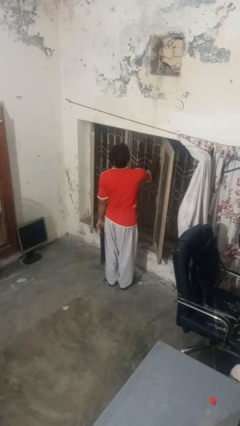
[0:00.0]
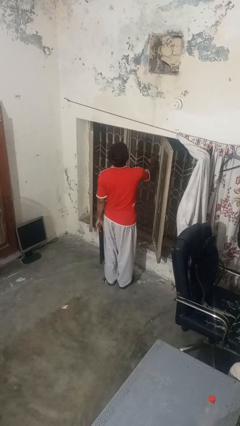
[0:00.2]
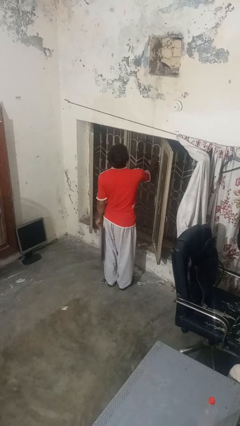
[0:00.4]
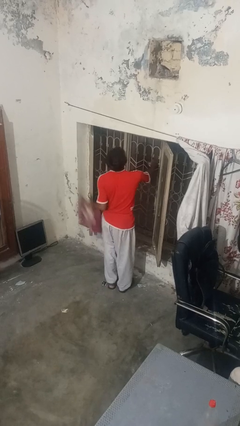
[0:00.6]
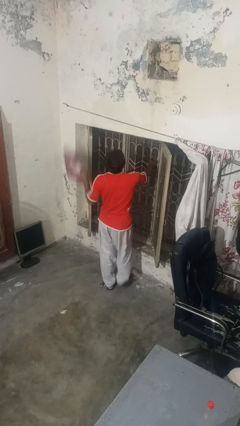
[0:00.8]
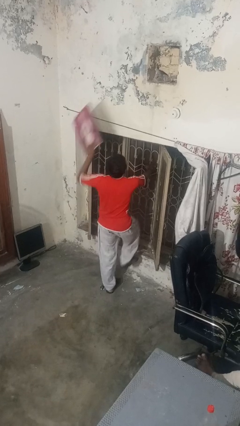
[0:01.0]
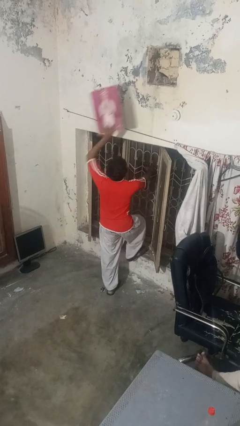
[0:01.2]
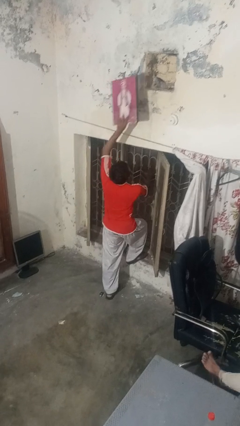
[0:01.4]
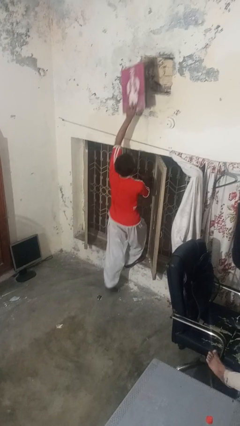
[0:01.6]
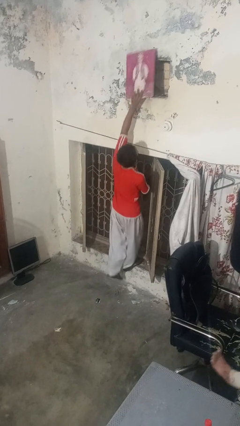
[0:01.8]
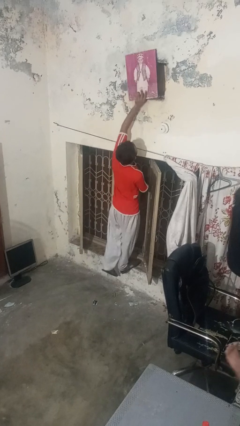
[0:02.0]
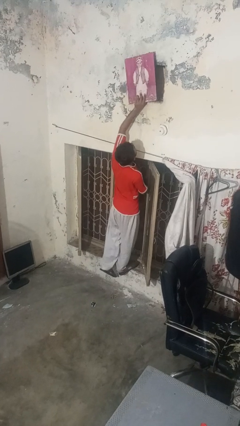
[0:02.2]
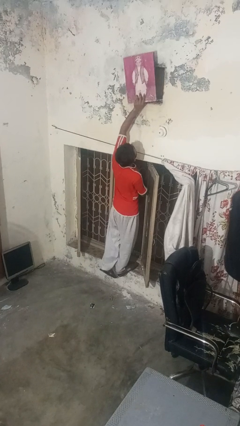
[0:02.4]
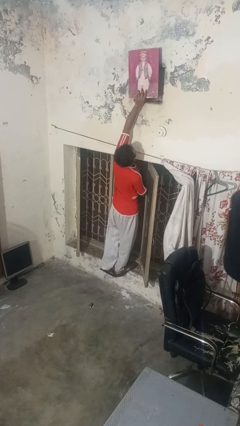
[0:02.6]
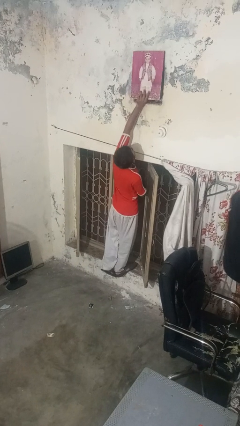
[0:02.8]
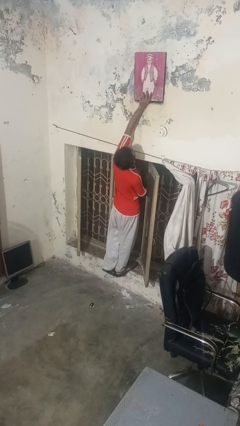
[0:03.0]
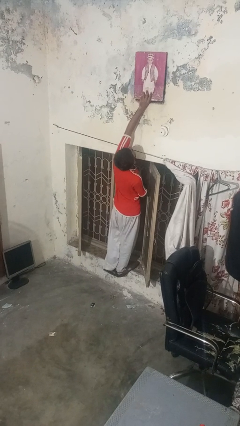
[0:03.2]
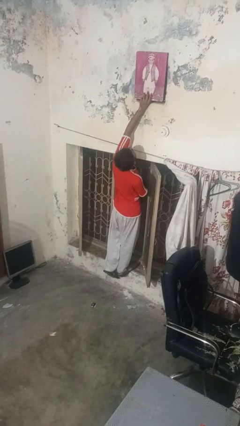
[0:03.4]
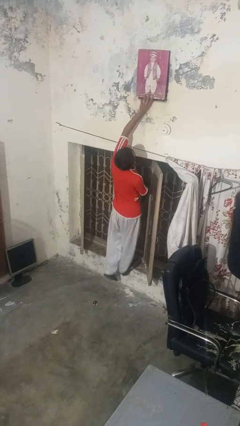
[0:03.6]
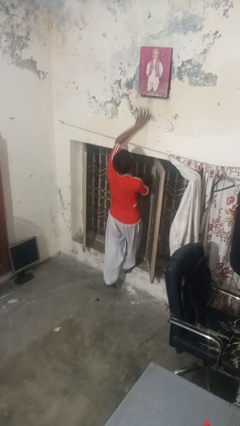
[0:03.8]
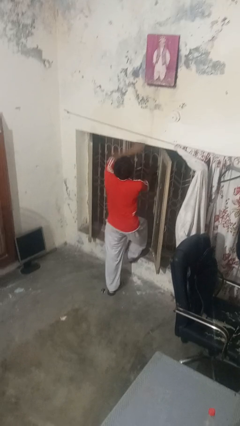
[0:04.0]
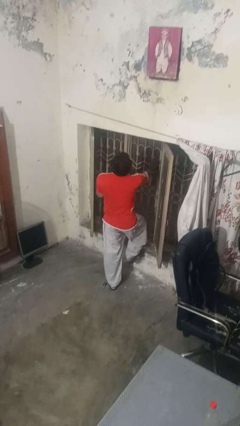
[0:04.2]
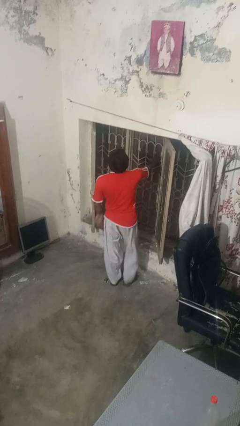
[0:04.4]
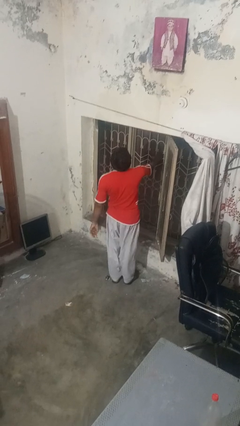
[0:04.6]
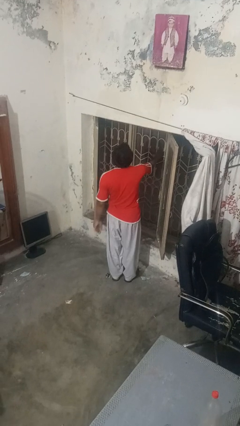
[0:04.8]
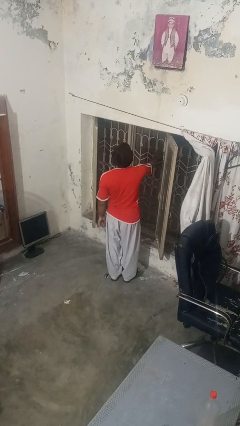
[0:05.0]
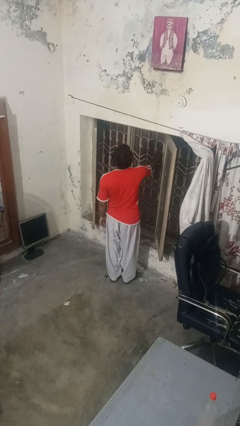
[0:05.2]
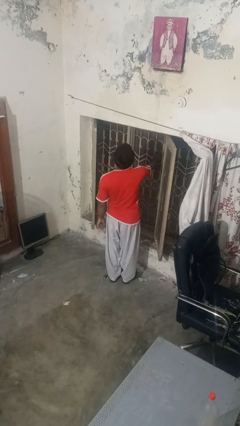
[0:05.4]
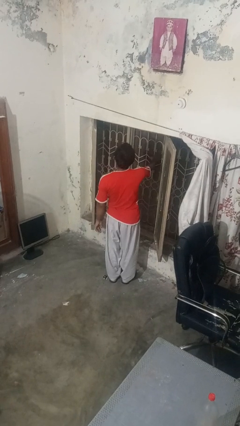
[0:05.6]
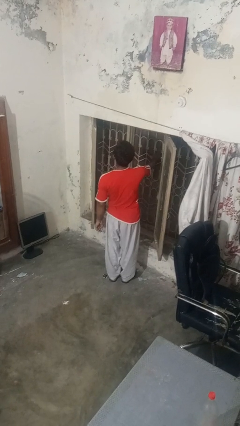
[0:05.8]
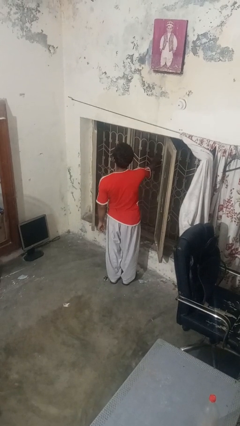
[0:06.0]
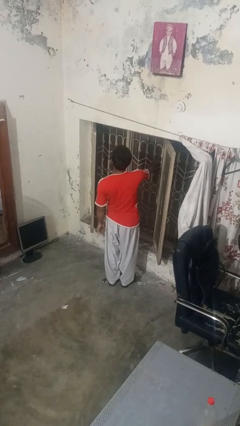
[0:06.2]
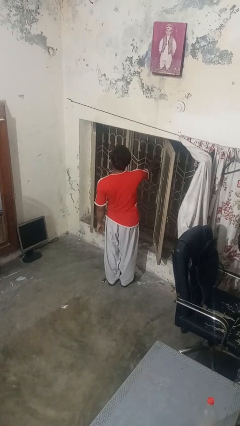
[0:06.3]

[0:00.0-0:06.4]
person puts up picture frame

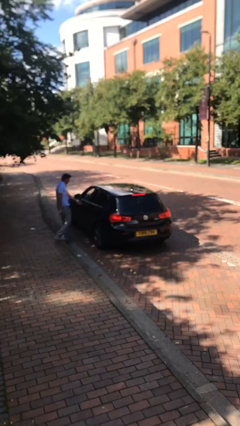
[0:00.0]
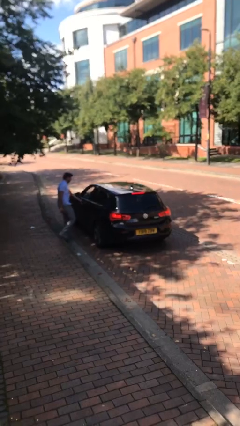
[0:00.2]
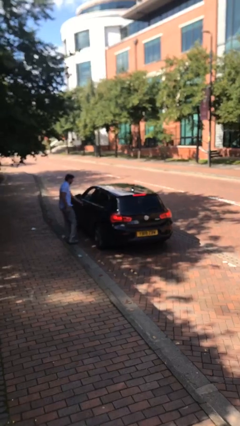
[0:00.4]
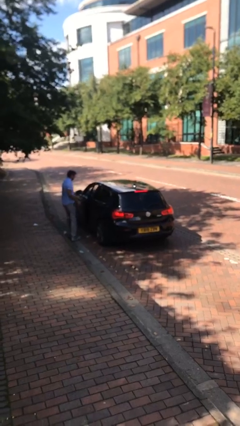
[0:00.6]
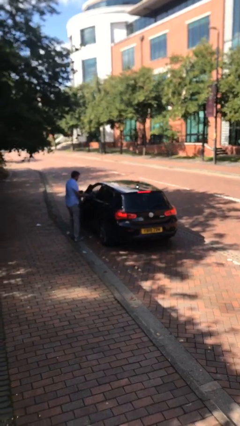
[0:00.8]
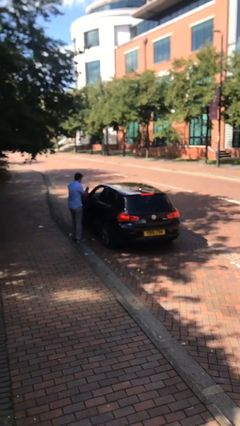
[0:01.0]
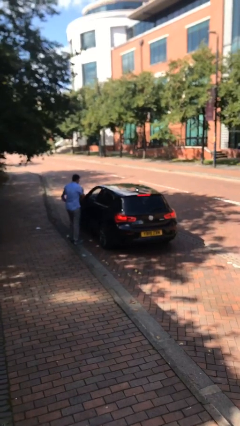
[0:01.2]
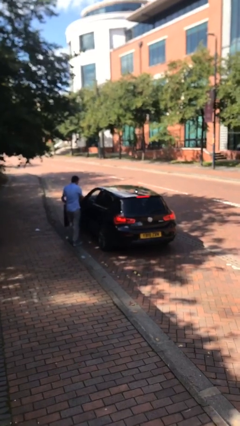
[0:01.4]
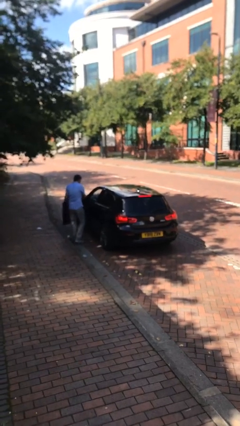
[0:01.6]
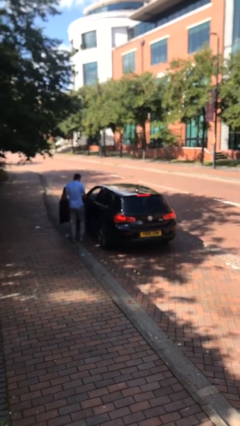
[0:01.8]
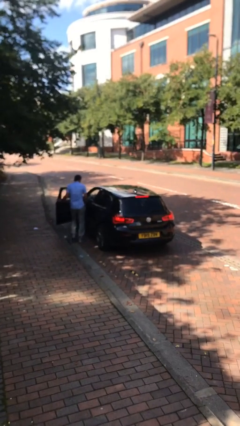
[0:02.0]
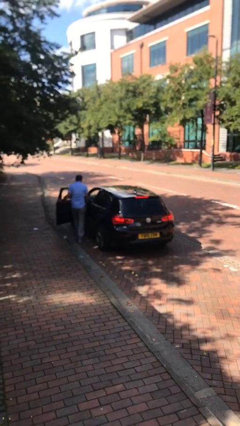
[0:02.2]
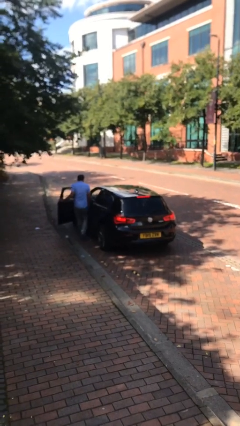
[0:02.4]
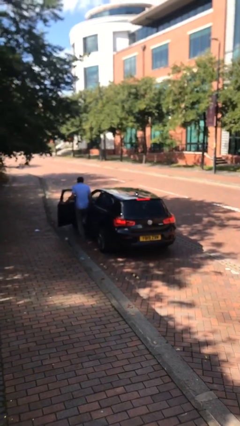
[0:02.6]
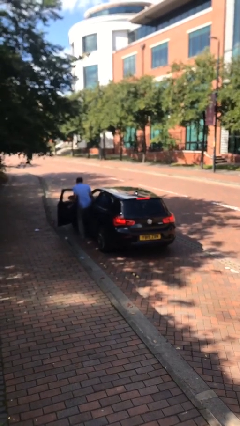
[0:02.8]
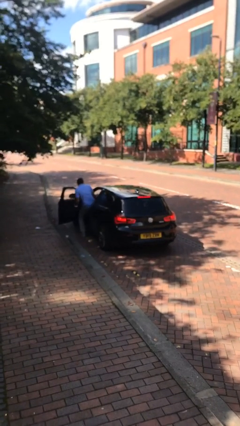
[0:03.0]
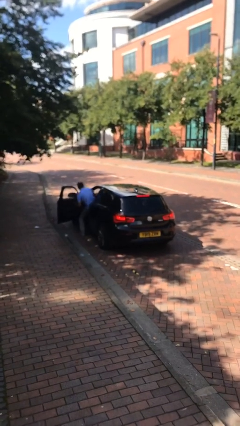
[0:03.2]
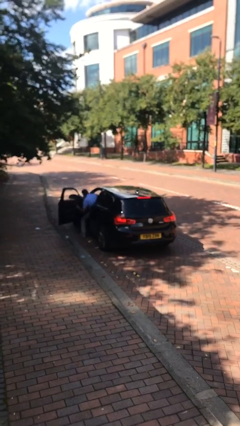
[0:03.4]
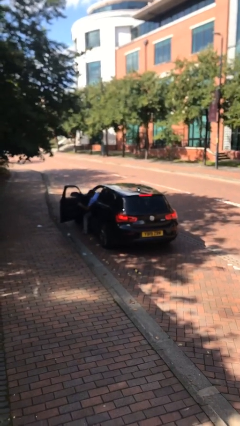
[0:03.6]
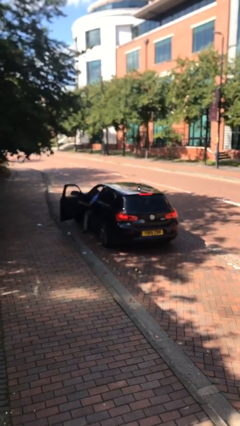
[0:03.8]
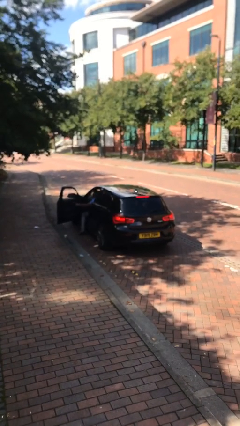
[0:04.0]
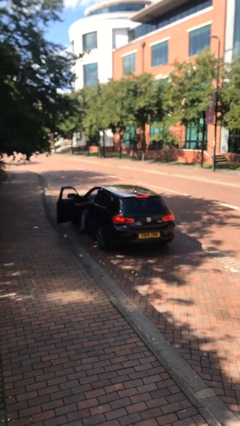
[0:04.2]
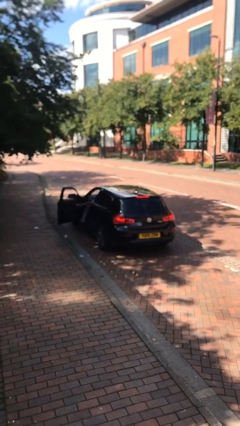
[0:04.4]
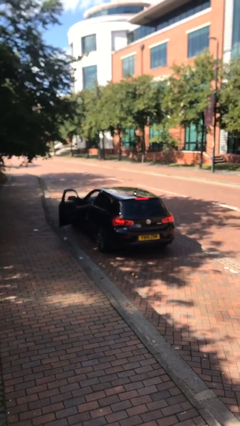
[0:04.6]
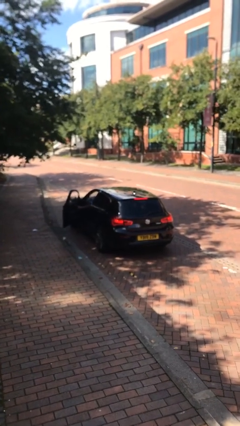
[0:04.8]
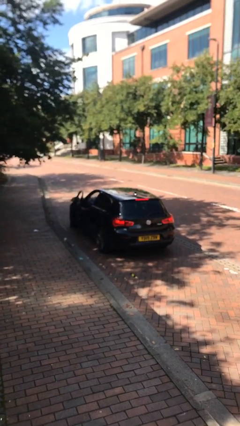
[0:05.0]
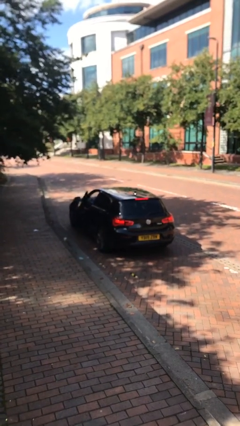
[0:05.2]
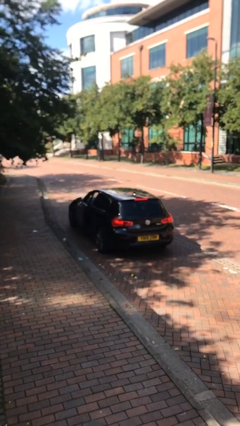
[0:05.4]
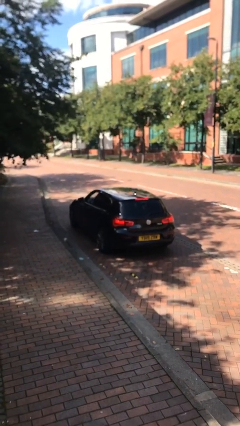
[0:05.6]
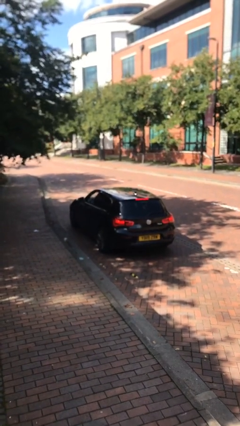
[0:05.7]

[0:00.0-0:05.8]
car picks up person

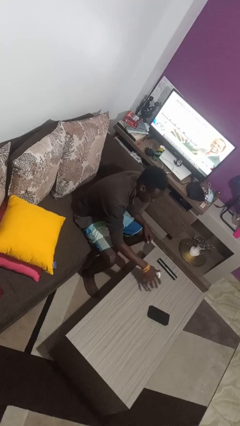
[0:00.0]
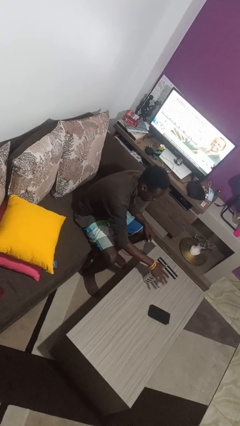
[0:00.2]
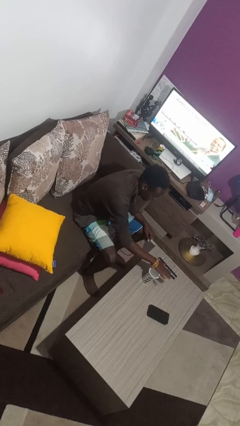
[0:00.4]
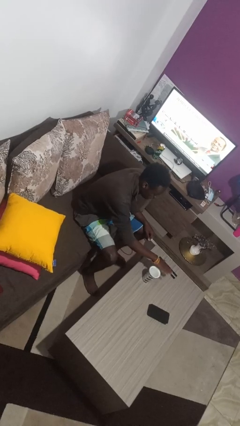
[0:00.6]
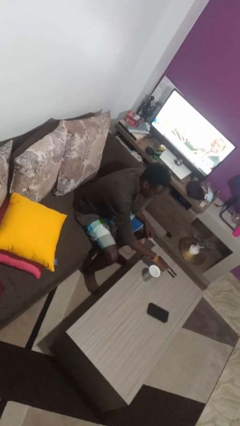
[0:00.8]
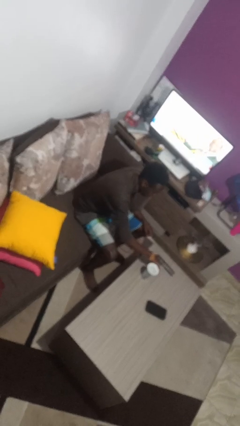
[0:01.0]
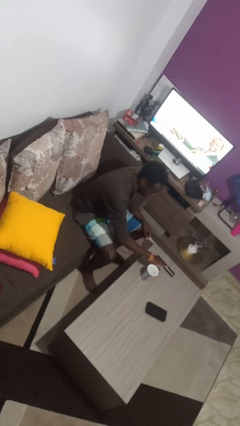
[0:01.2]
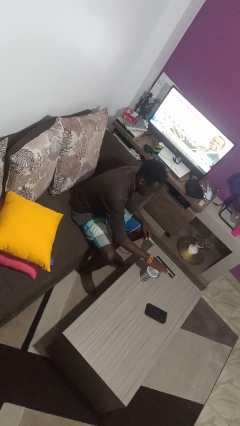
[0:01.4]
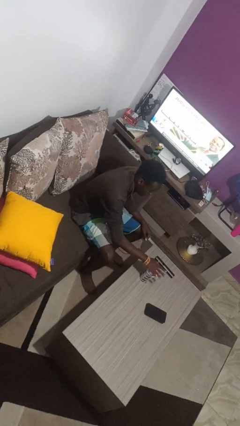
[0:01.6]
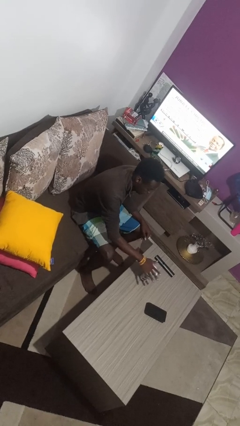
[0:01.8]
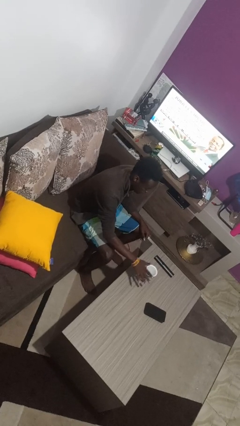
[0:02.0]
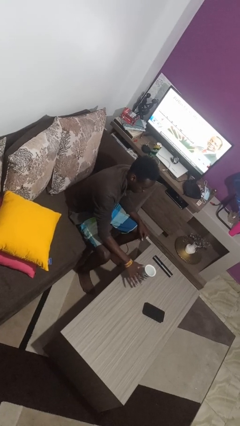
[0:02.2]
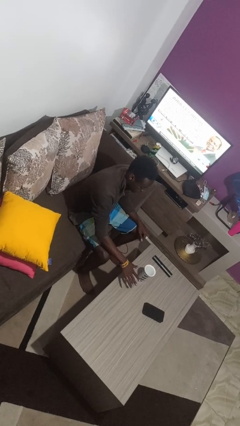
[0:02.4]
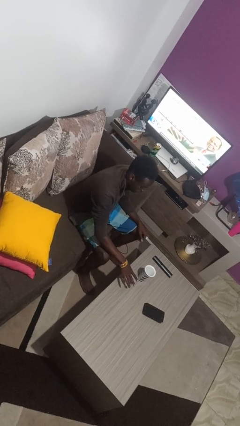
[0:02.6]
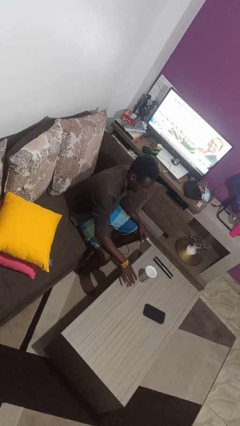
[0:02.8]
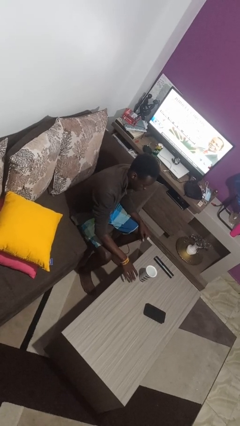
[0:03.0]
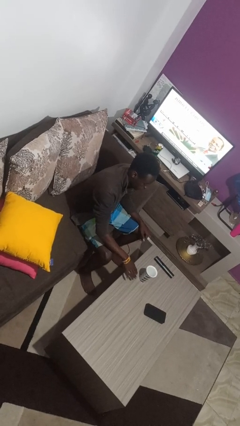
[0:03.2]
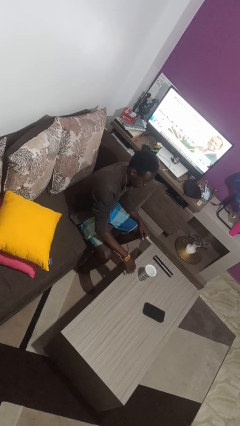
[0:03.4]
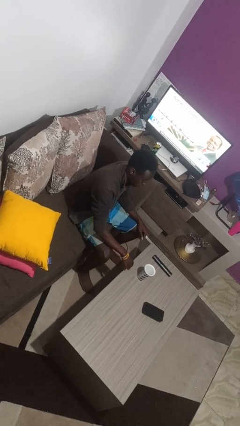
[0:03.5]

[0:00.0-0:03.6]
person waves hand over object

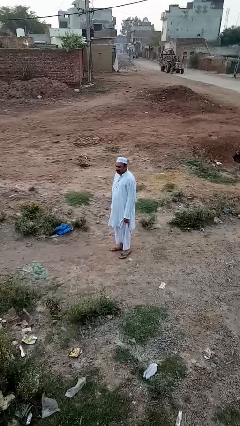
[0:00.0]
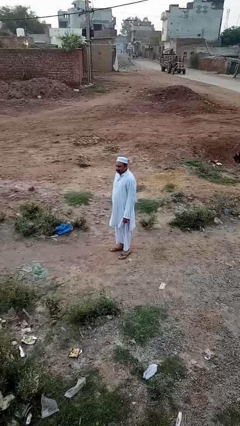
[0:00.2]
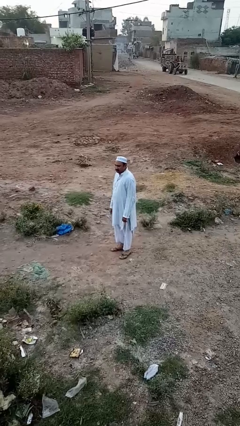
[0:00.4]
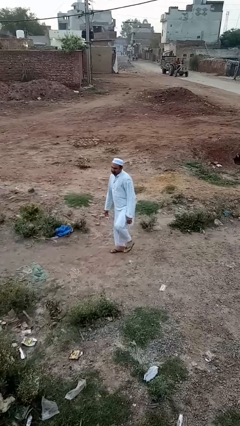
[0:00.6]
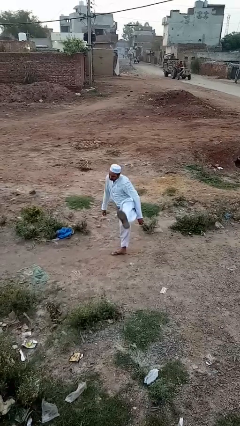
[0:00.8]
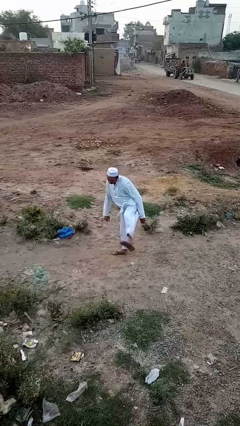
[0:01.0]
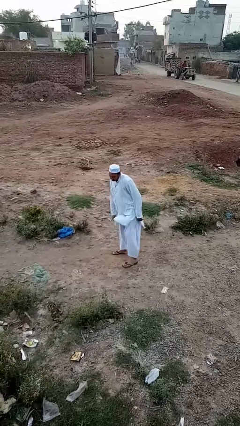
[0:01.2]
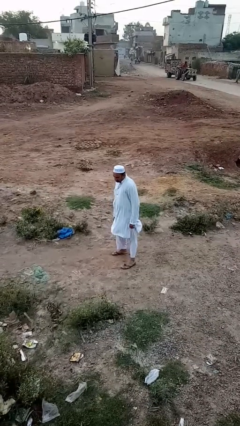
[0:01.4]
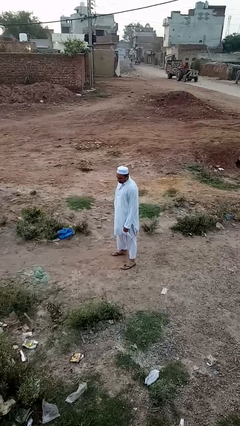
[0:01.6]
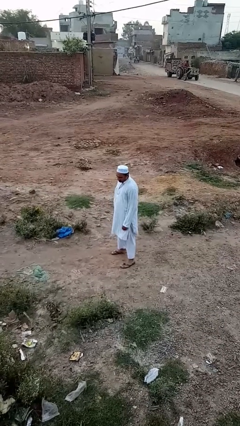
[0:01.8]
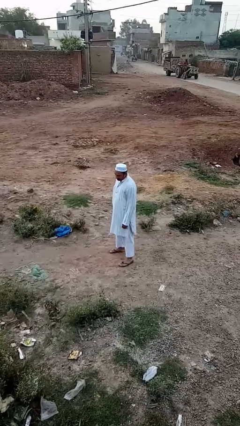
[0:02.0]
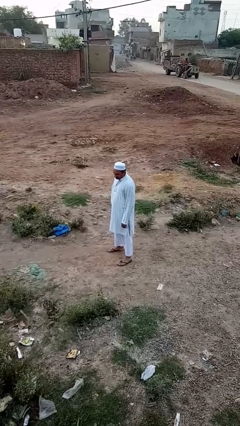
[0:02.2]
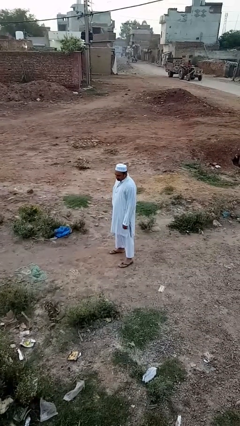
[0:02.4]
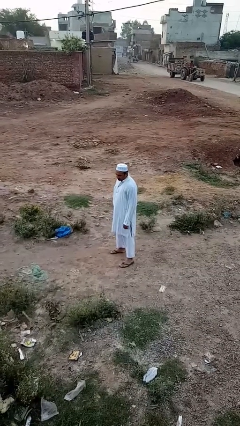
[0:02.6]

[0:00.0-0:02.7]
person karate kicks
